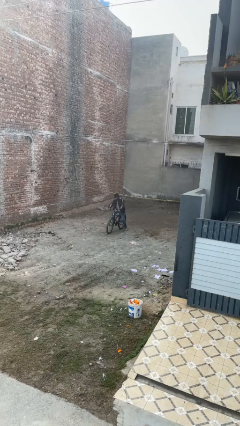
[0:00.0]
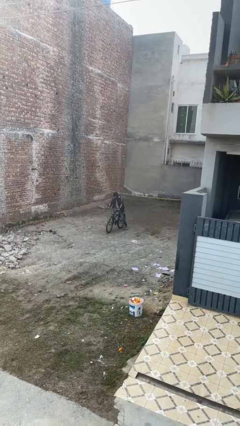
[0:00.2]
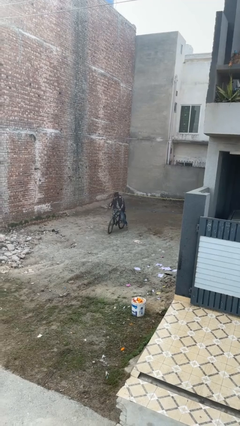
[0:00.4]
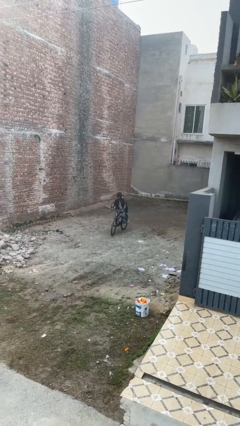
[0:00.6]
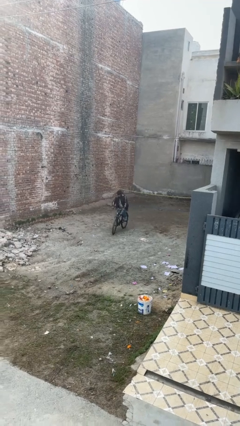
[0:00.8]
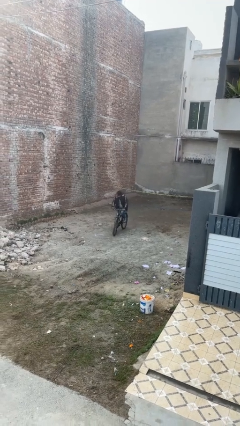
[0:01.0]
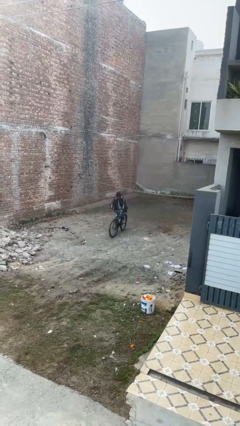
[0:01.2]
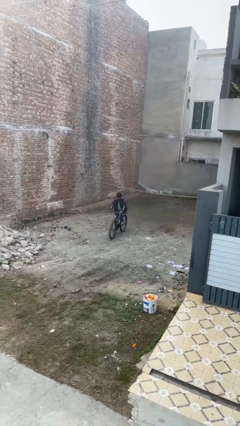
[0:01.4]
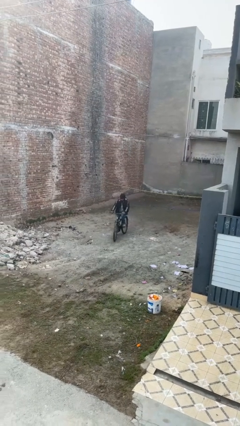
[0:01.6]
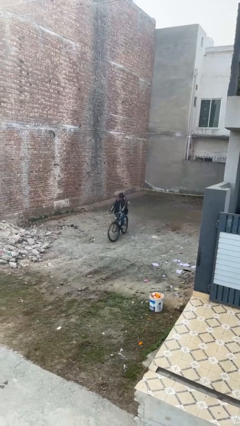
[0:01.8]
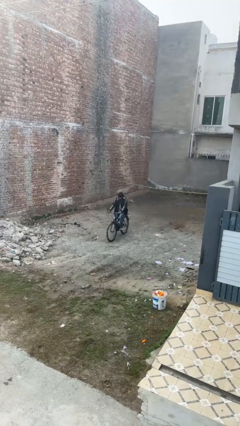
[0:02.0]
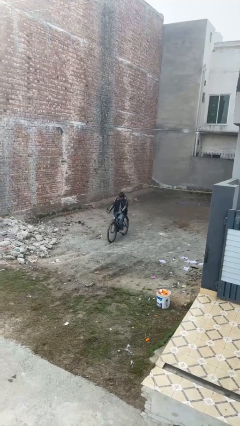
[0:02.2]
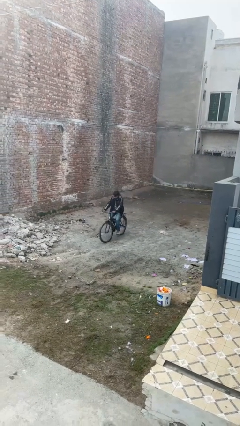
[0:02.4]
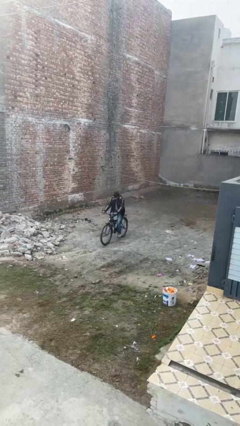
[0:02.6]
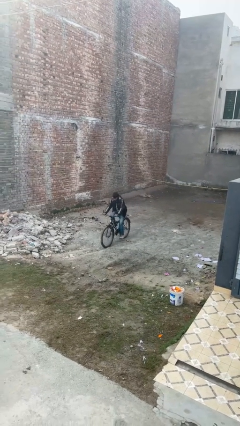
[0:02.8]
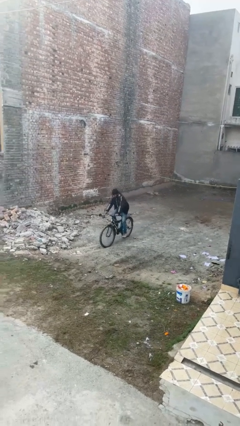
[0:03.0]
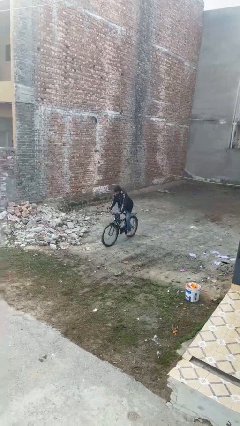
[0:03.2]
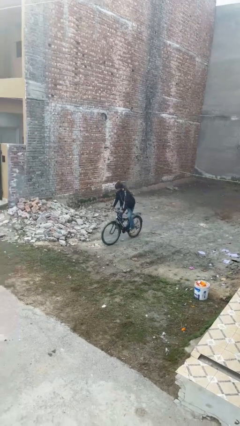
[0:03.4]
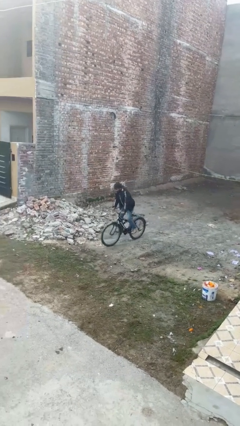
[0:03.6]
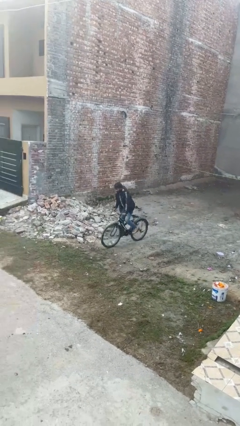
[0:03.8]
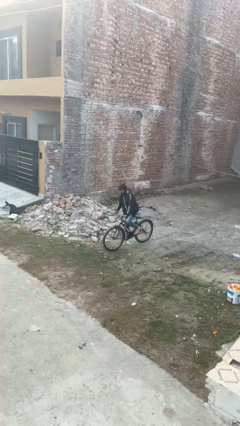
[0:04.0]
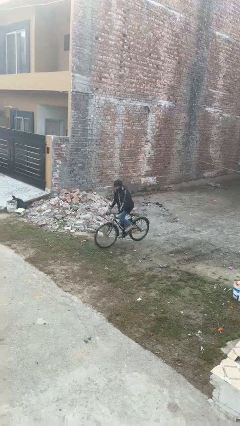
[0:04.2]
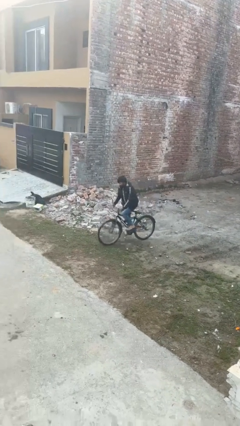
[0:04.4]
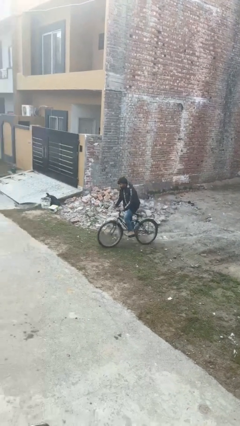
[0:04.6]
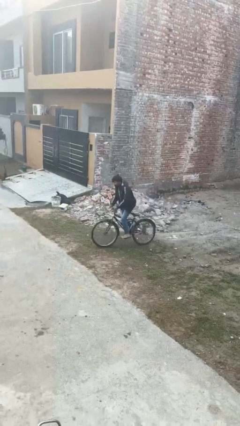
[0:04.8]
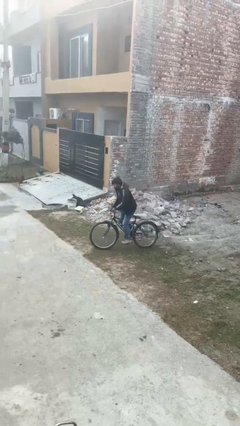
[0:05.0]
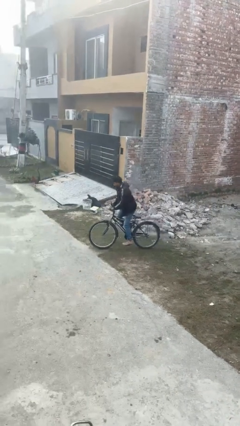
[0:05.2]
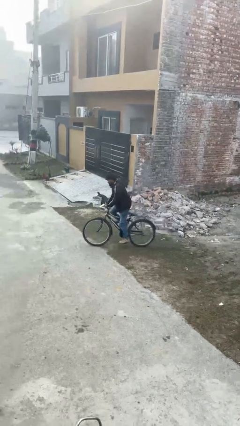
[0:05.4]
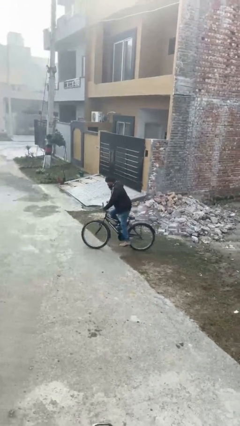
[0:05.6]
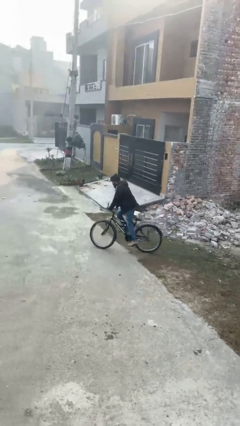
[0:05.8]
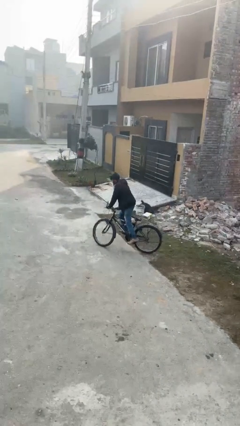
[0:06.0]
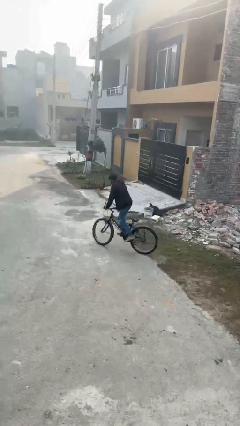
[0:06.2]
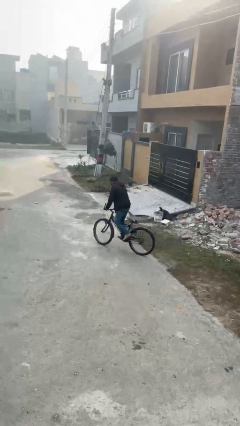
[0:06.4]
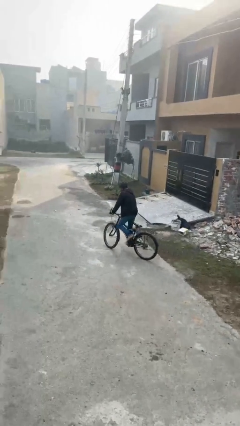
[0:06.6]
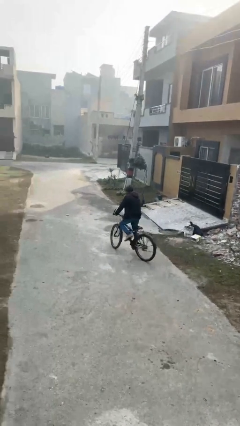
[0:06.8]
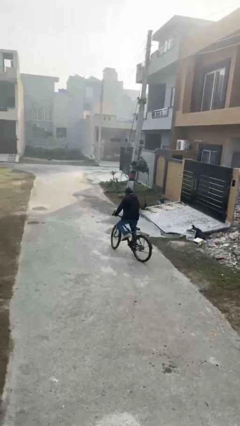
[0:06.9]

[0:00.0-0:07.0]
person rides bicycle

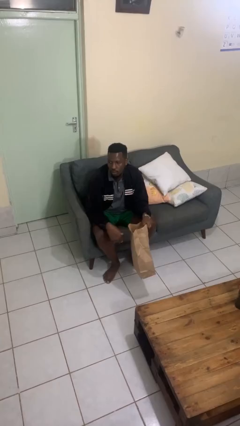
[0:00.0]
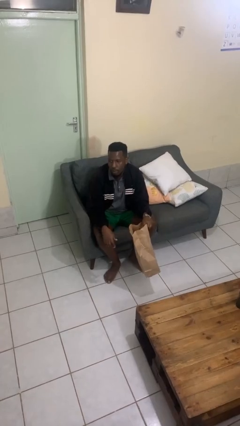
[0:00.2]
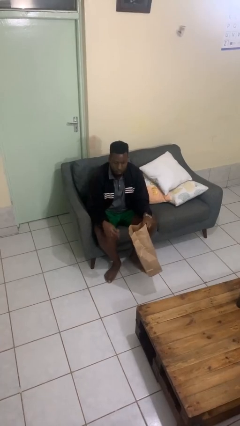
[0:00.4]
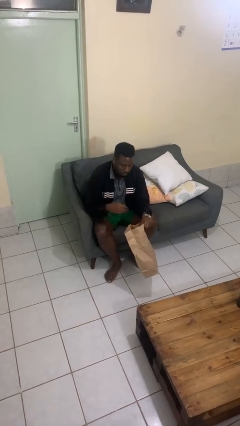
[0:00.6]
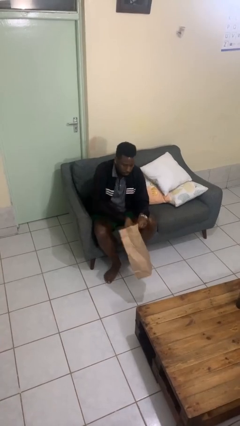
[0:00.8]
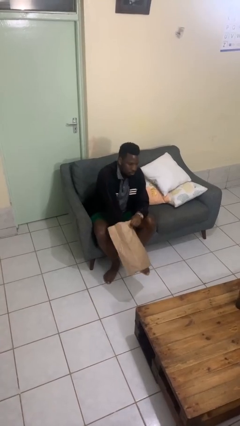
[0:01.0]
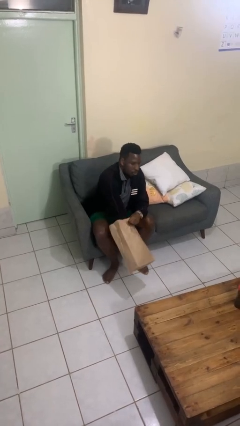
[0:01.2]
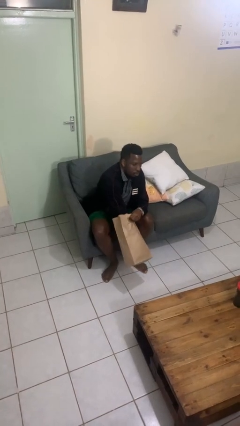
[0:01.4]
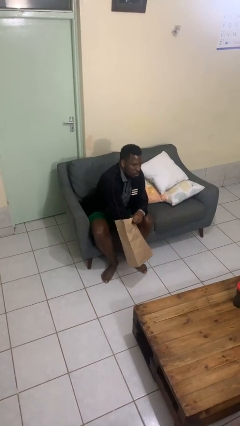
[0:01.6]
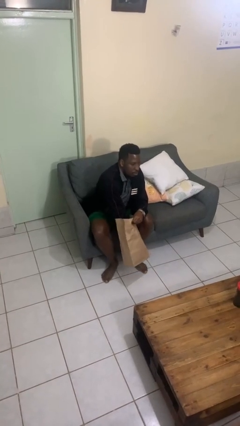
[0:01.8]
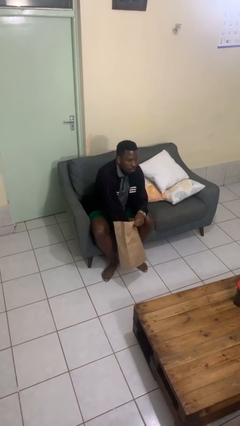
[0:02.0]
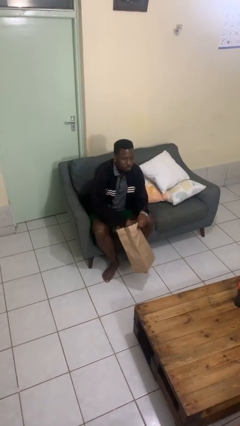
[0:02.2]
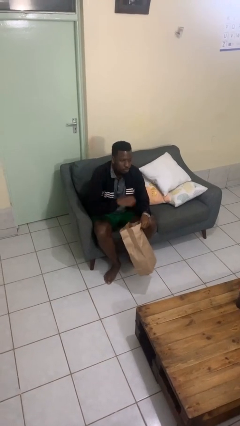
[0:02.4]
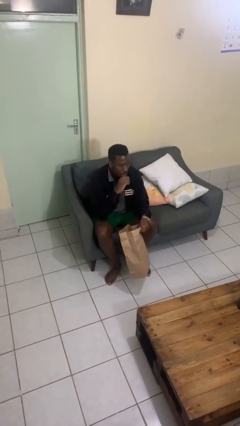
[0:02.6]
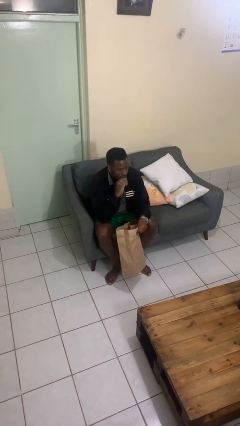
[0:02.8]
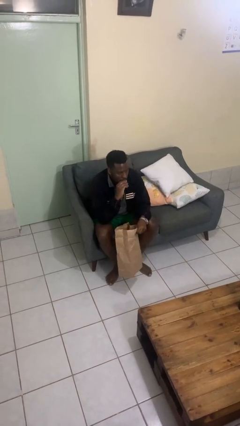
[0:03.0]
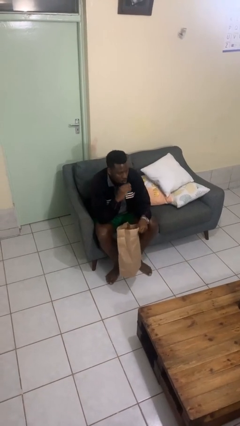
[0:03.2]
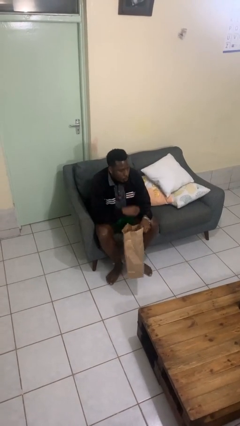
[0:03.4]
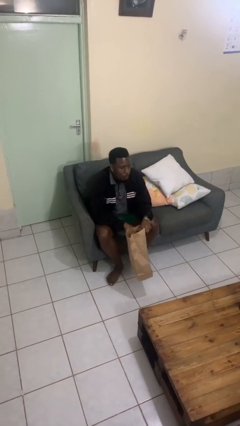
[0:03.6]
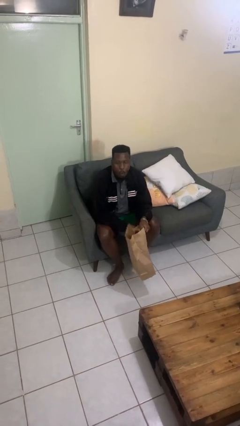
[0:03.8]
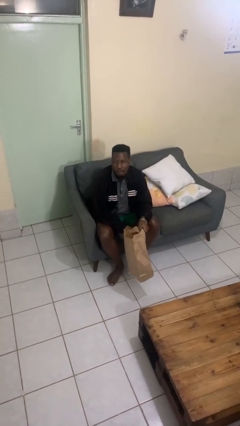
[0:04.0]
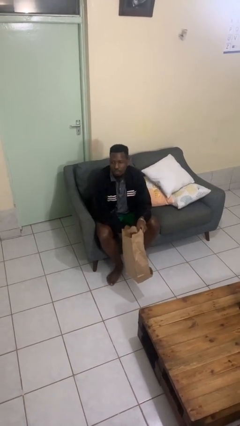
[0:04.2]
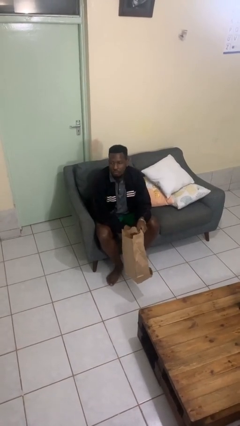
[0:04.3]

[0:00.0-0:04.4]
person eats snack from bag

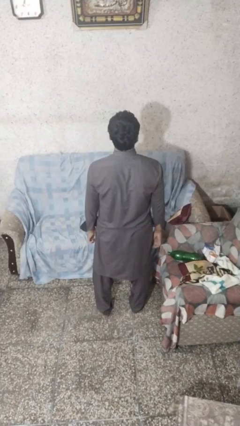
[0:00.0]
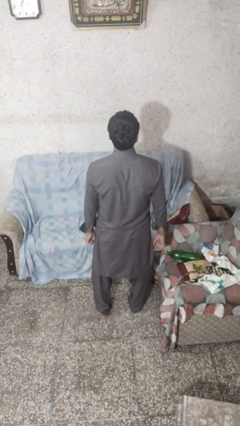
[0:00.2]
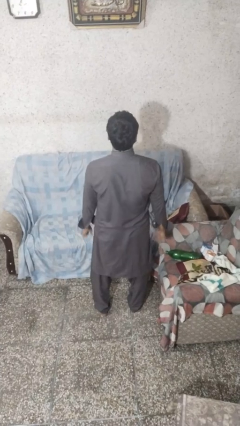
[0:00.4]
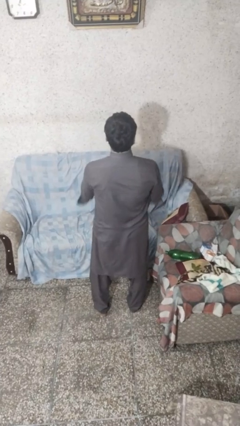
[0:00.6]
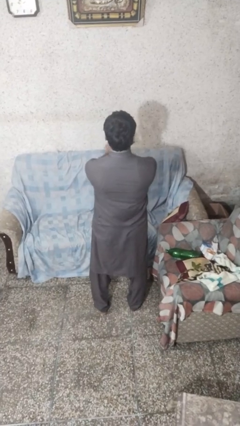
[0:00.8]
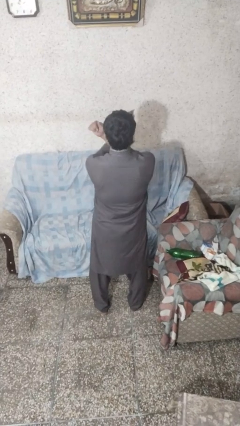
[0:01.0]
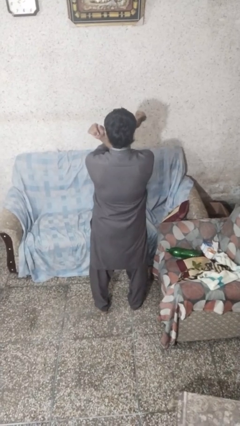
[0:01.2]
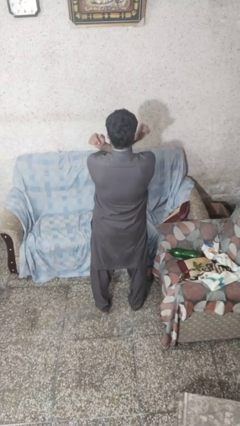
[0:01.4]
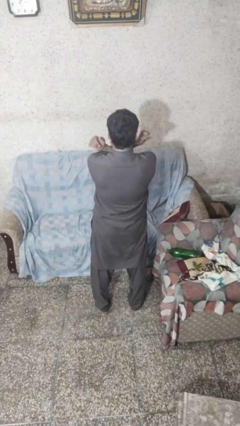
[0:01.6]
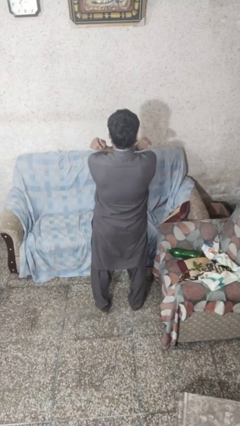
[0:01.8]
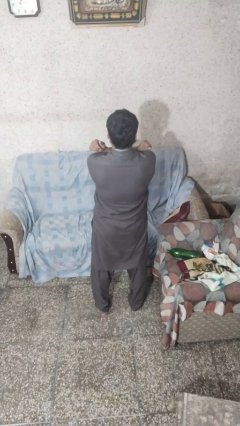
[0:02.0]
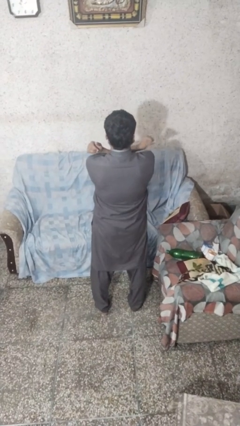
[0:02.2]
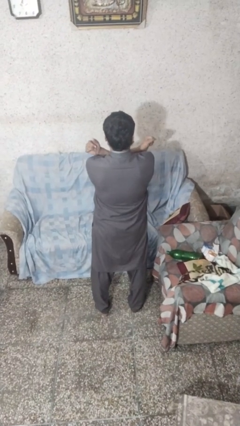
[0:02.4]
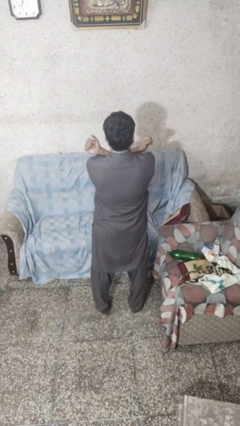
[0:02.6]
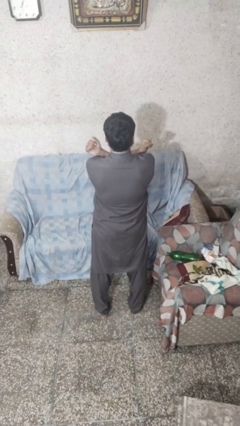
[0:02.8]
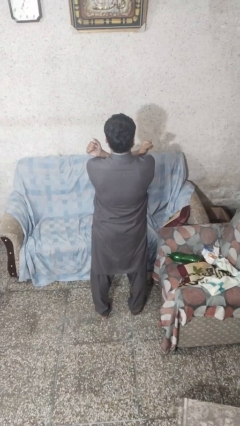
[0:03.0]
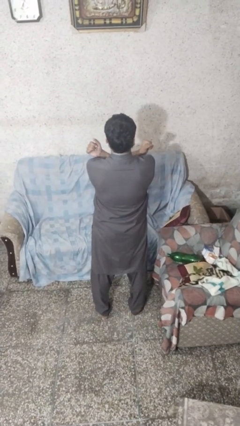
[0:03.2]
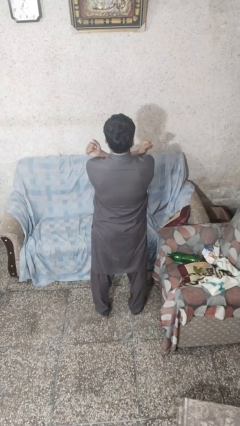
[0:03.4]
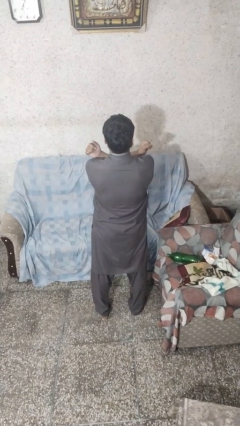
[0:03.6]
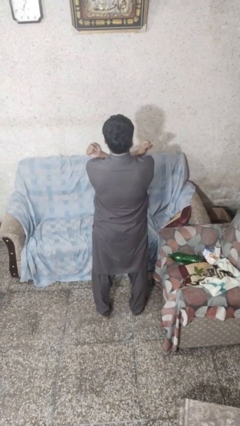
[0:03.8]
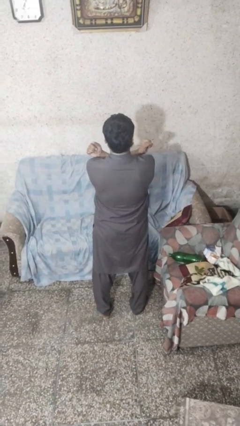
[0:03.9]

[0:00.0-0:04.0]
person gestures arms x

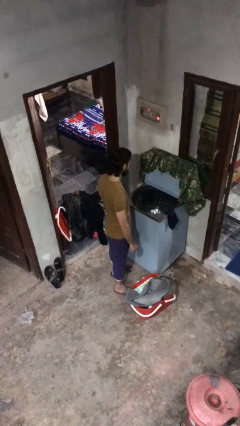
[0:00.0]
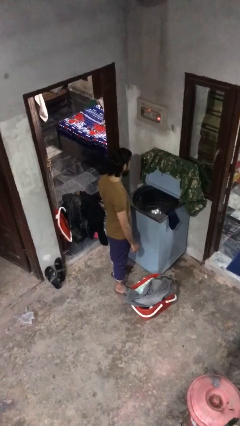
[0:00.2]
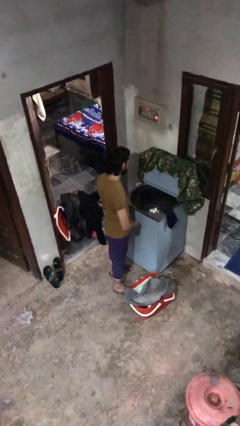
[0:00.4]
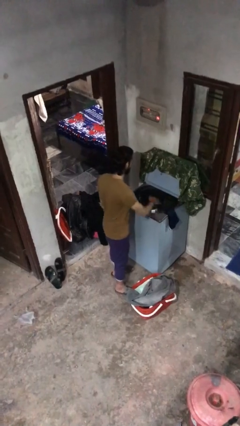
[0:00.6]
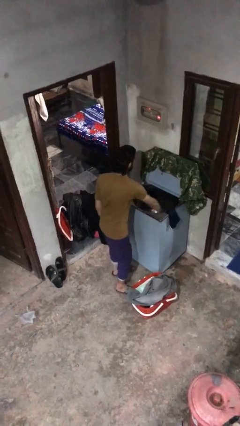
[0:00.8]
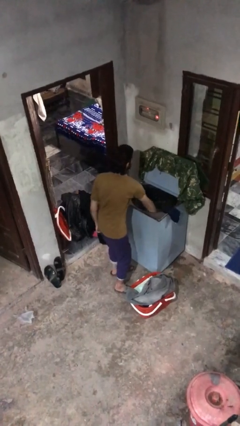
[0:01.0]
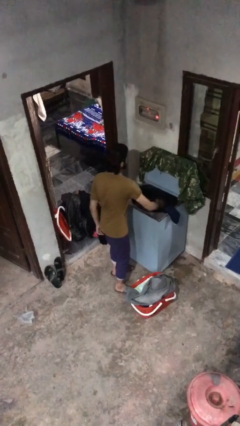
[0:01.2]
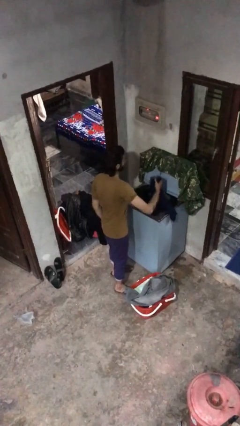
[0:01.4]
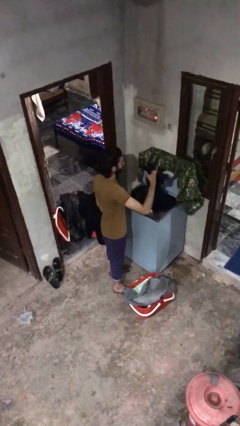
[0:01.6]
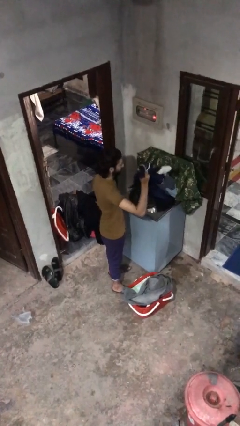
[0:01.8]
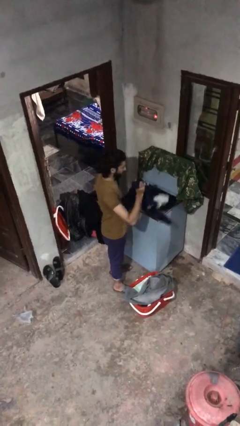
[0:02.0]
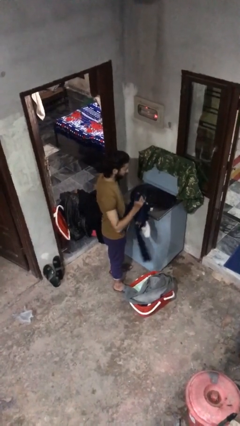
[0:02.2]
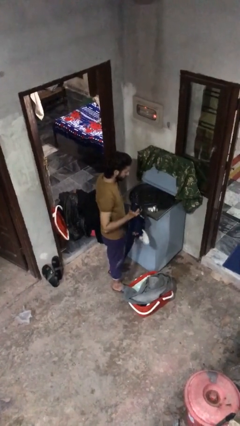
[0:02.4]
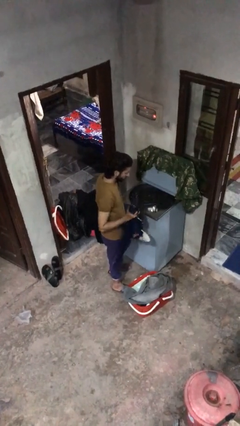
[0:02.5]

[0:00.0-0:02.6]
person loads clotheswasher
